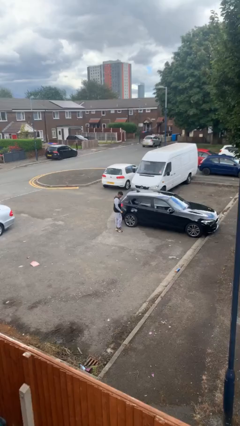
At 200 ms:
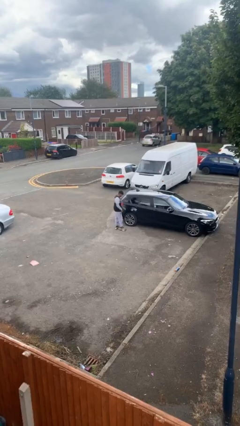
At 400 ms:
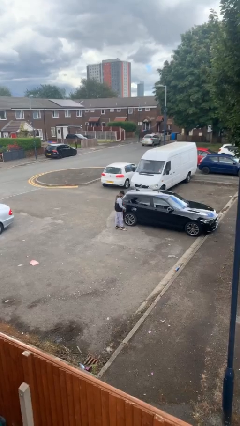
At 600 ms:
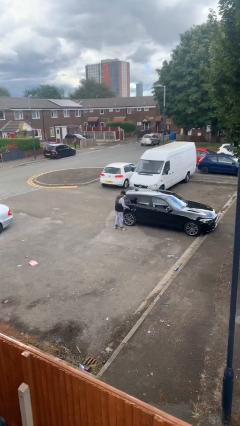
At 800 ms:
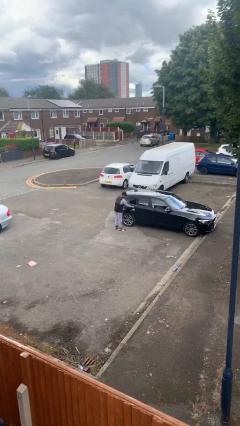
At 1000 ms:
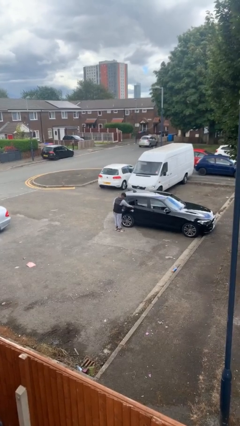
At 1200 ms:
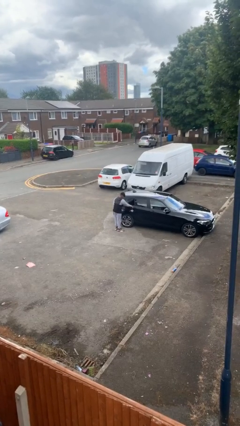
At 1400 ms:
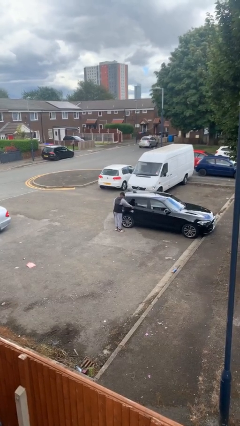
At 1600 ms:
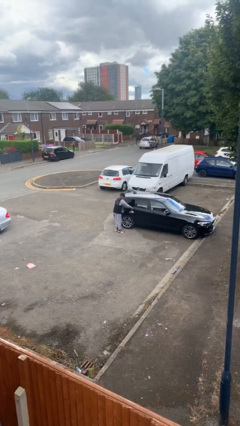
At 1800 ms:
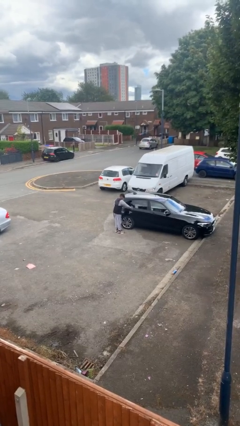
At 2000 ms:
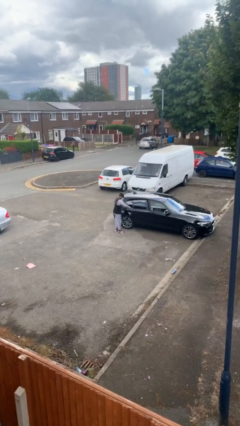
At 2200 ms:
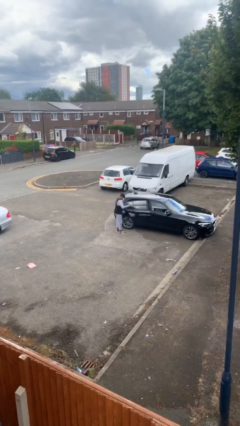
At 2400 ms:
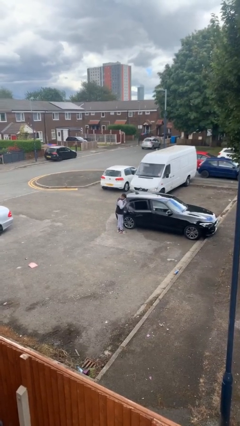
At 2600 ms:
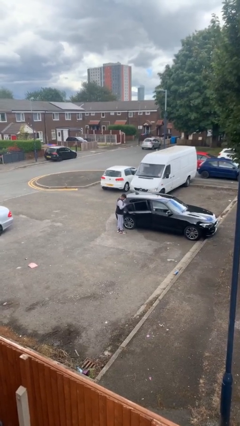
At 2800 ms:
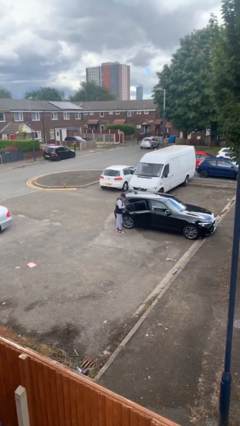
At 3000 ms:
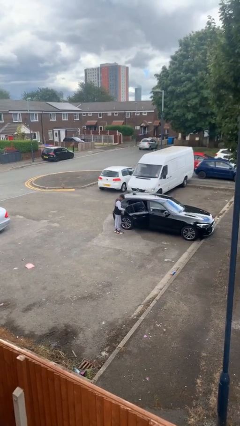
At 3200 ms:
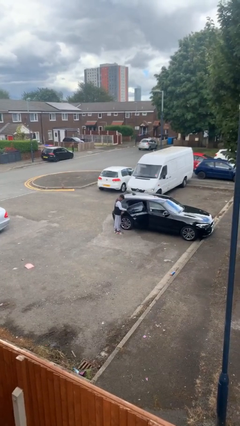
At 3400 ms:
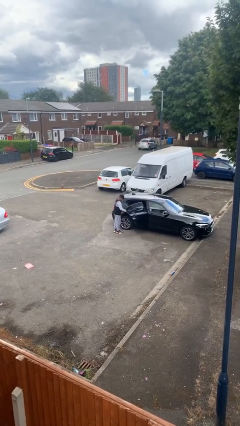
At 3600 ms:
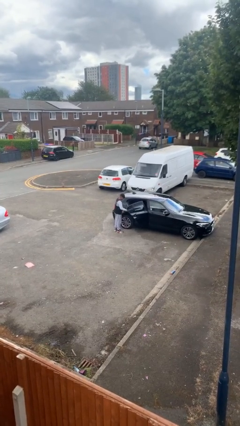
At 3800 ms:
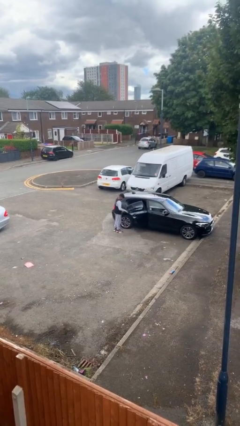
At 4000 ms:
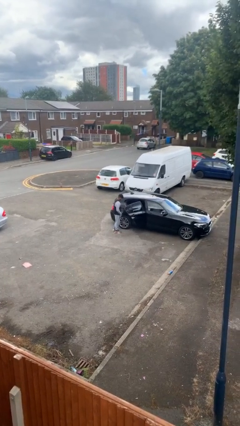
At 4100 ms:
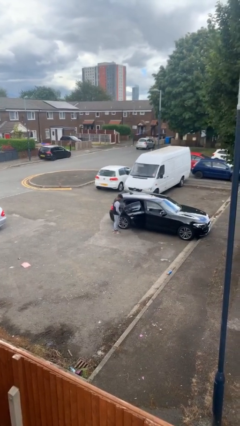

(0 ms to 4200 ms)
person opens car door

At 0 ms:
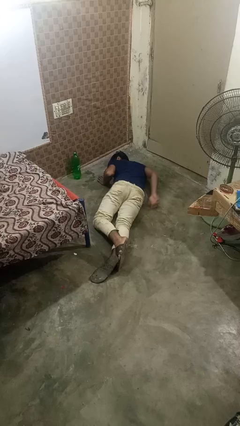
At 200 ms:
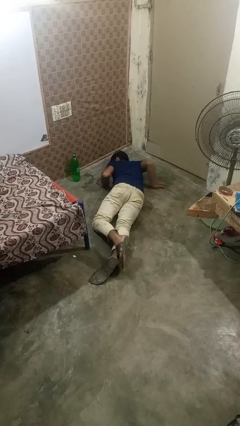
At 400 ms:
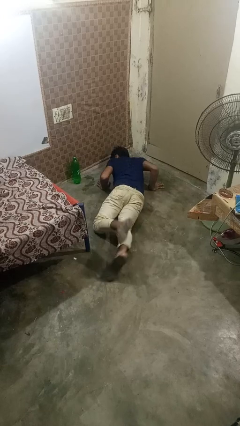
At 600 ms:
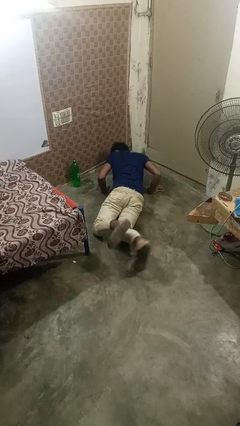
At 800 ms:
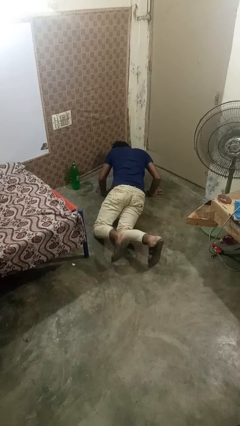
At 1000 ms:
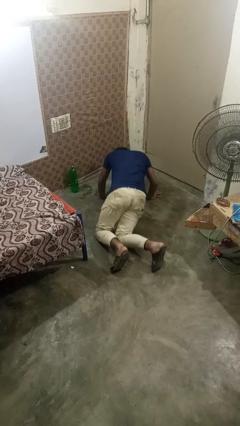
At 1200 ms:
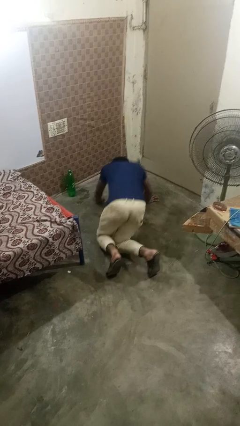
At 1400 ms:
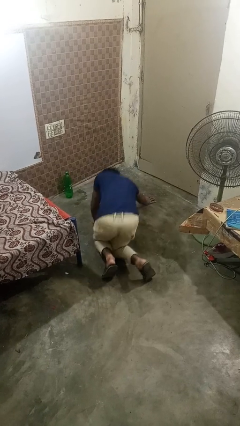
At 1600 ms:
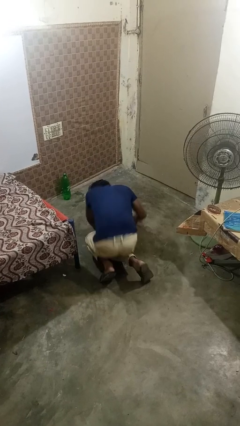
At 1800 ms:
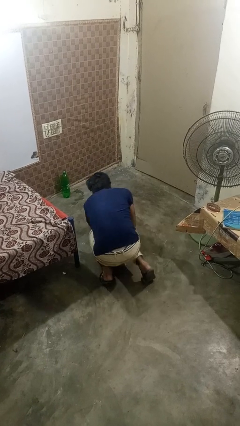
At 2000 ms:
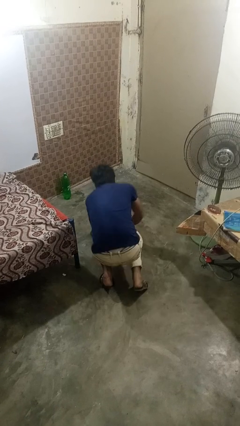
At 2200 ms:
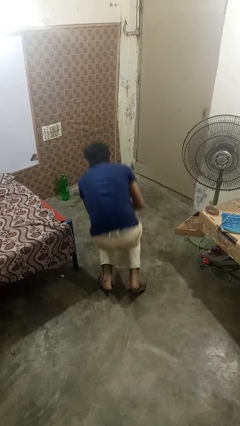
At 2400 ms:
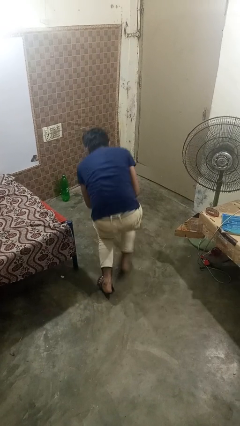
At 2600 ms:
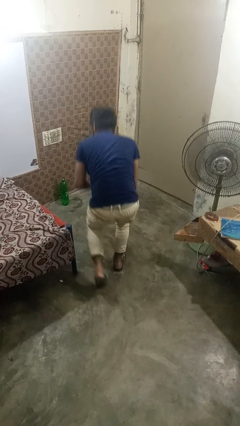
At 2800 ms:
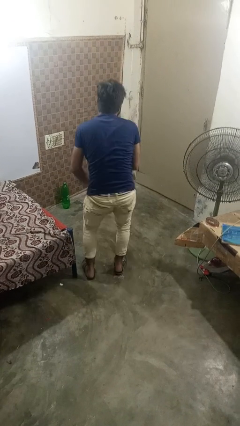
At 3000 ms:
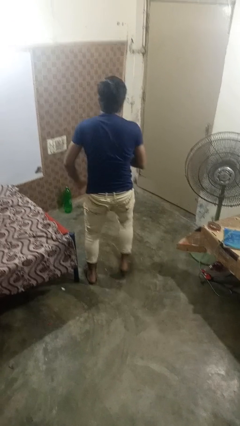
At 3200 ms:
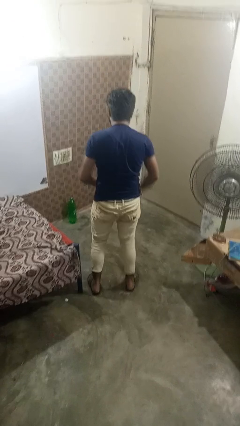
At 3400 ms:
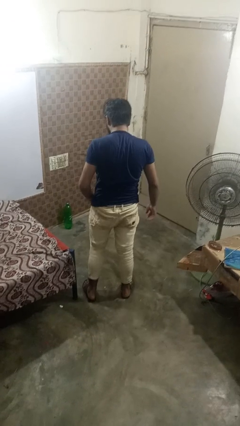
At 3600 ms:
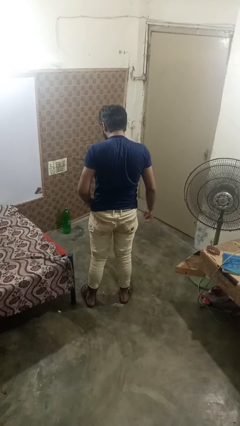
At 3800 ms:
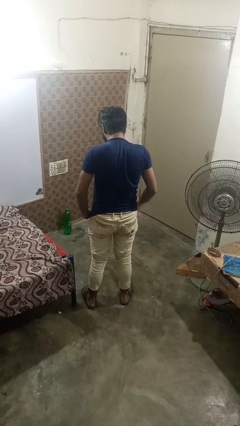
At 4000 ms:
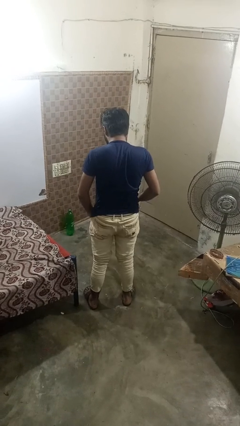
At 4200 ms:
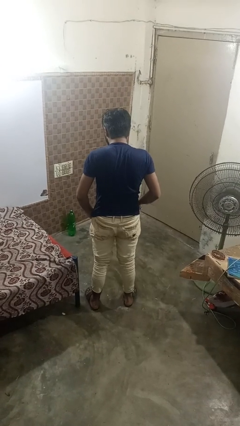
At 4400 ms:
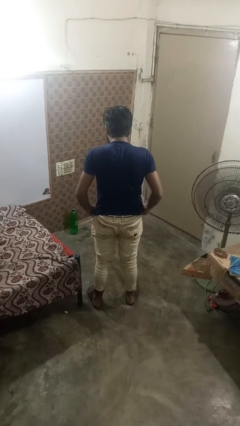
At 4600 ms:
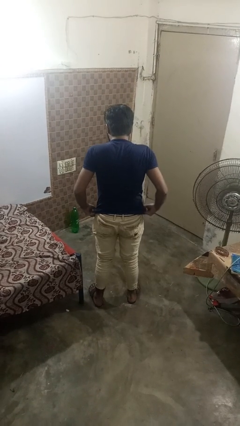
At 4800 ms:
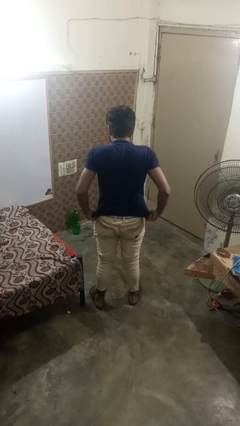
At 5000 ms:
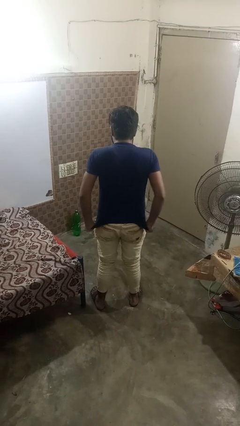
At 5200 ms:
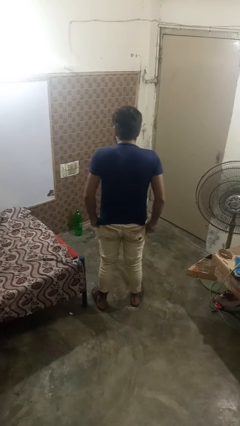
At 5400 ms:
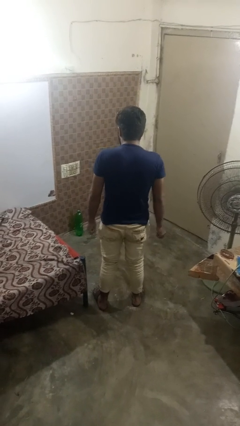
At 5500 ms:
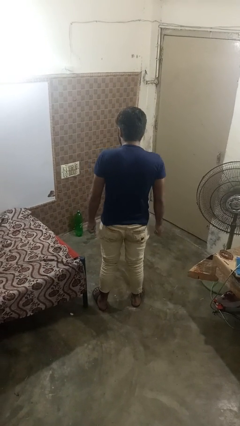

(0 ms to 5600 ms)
person stands up from floor

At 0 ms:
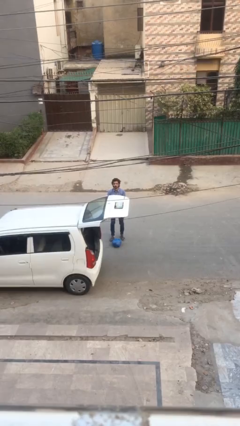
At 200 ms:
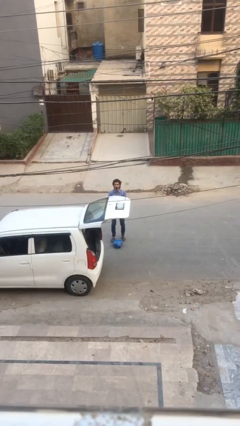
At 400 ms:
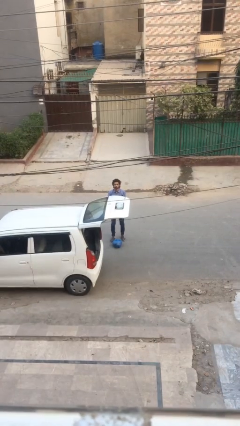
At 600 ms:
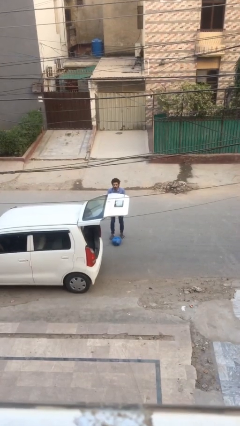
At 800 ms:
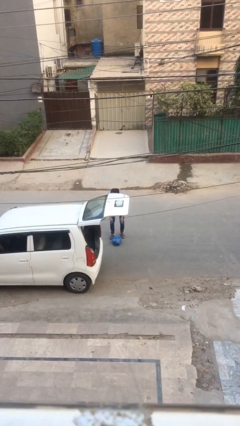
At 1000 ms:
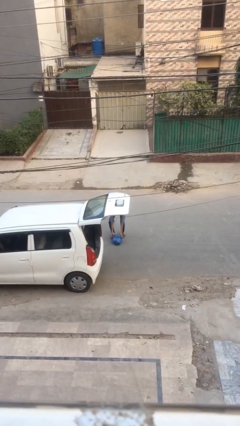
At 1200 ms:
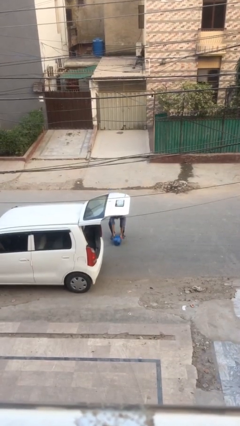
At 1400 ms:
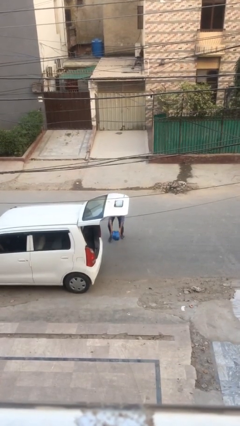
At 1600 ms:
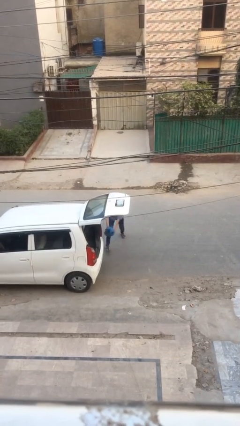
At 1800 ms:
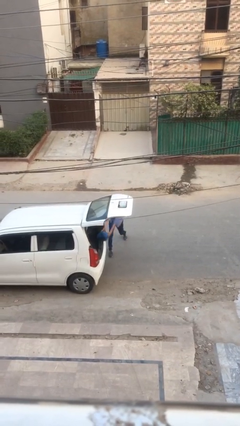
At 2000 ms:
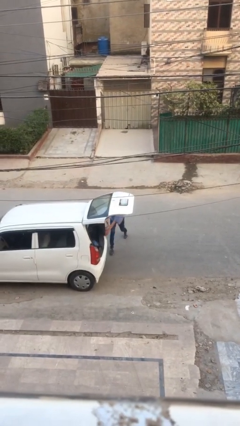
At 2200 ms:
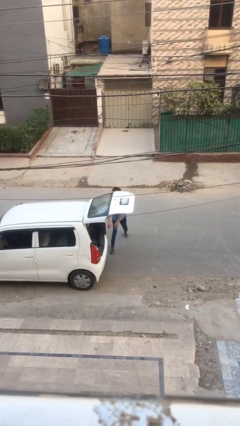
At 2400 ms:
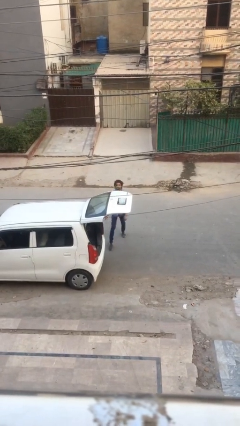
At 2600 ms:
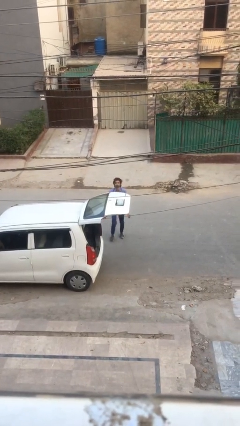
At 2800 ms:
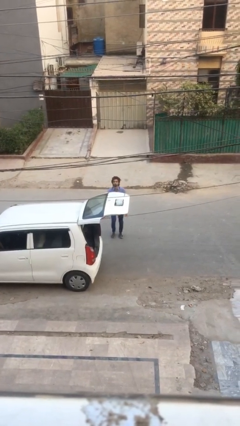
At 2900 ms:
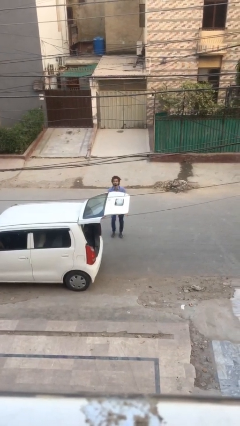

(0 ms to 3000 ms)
person loads car

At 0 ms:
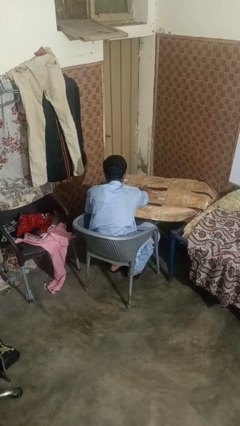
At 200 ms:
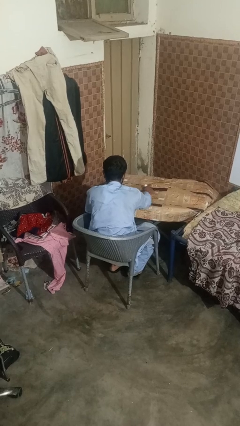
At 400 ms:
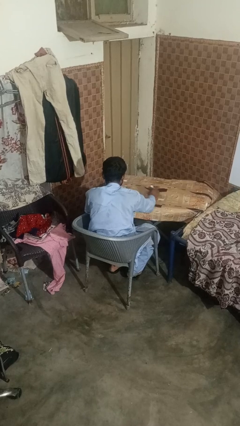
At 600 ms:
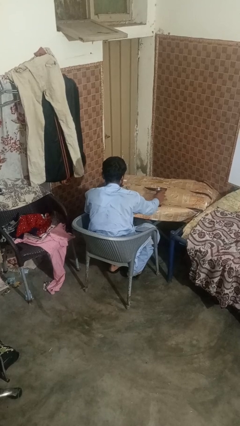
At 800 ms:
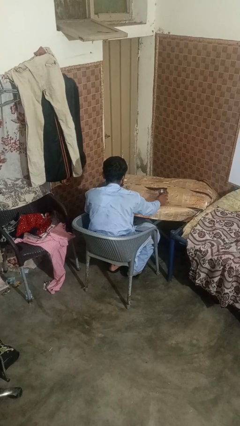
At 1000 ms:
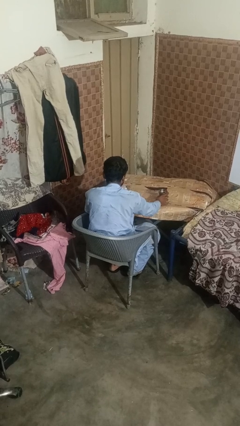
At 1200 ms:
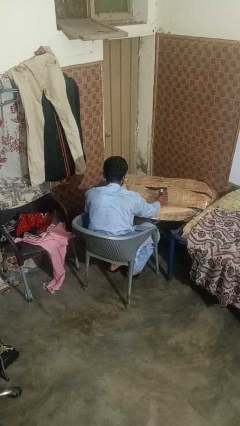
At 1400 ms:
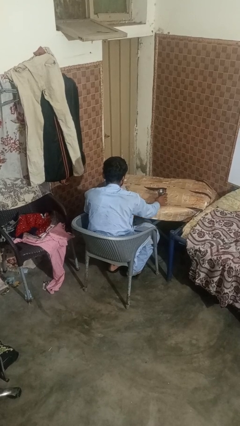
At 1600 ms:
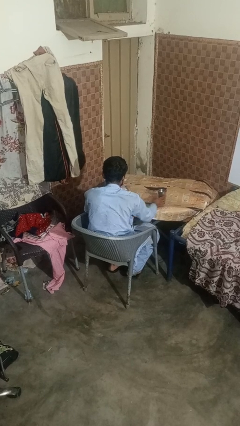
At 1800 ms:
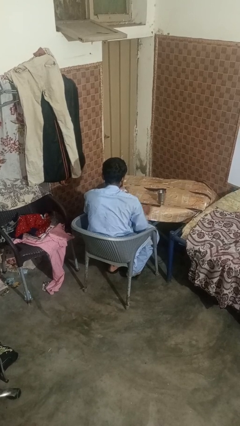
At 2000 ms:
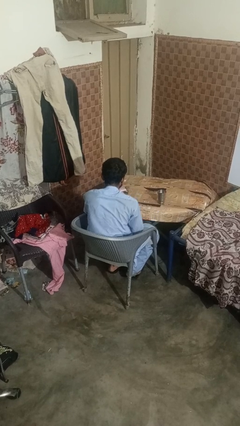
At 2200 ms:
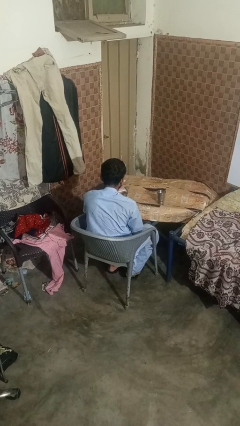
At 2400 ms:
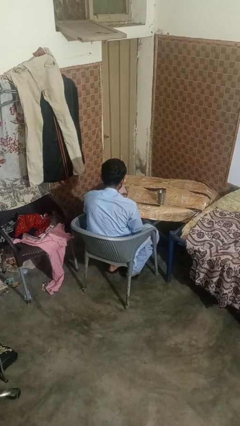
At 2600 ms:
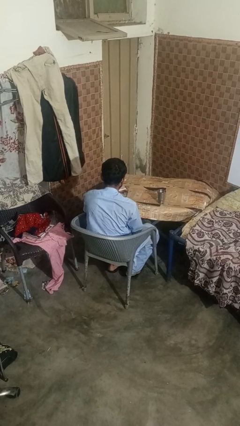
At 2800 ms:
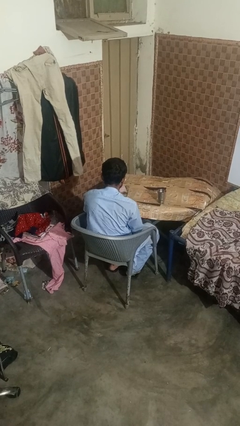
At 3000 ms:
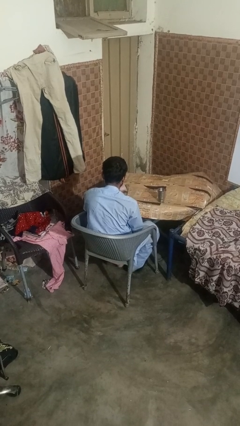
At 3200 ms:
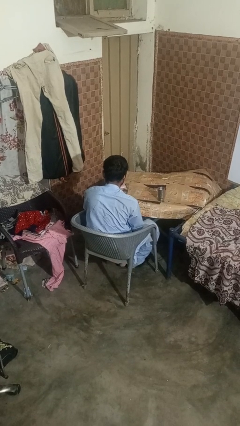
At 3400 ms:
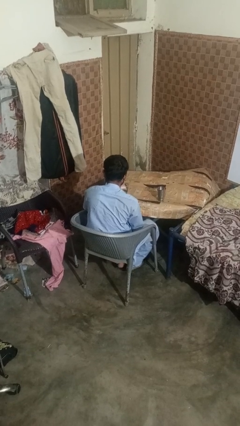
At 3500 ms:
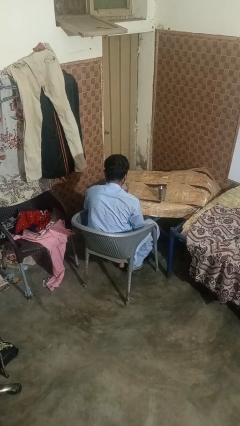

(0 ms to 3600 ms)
person sets upright glass

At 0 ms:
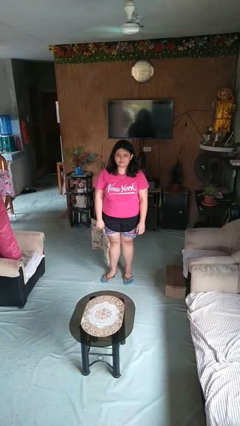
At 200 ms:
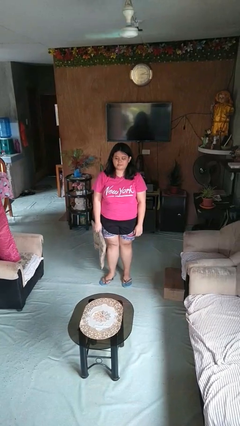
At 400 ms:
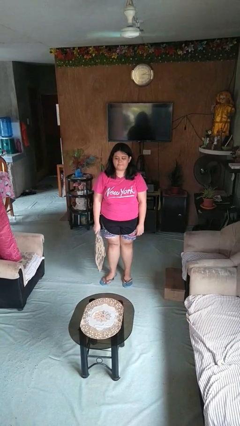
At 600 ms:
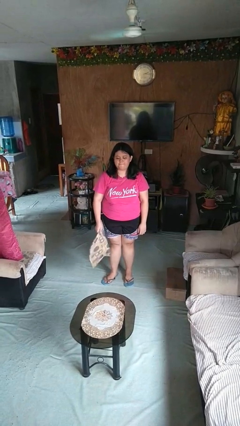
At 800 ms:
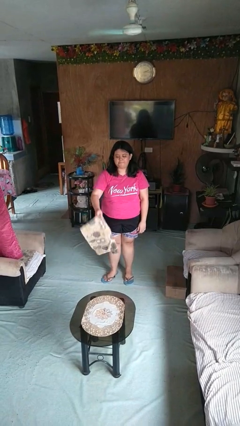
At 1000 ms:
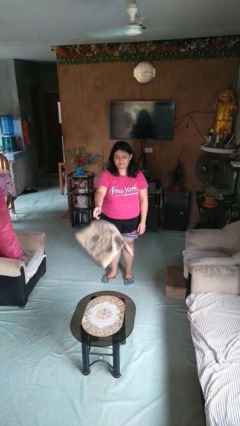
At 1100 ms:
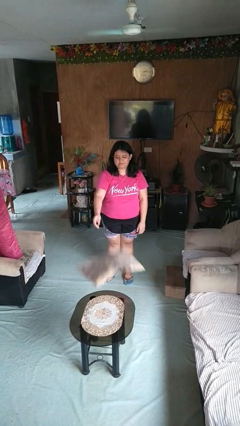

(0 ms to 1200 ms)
person throws object on table
